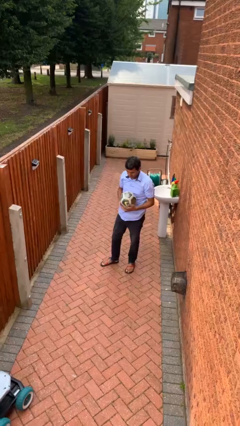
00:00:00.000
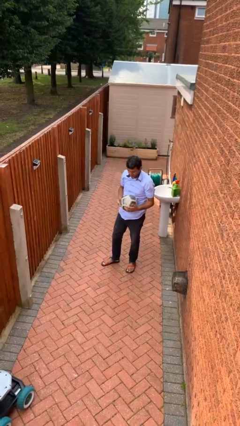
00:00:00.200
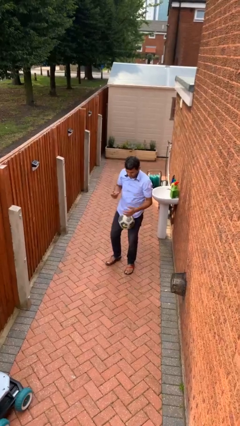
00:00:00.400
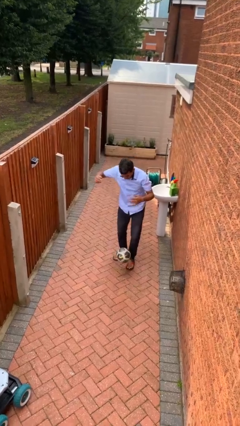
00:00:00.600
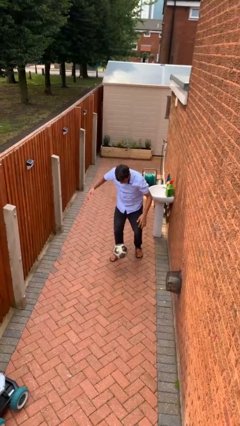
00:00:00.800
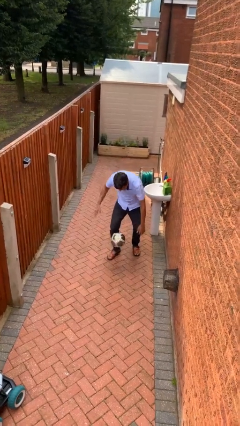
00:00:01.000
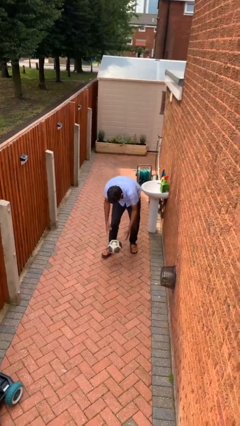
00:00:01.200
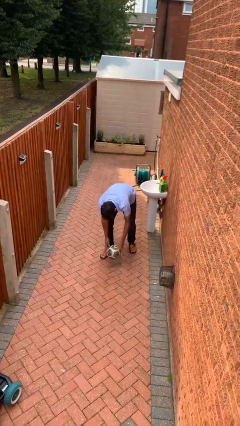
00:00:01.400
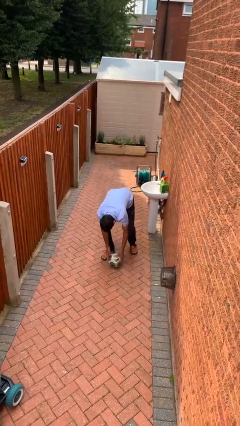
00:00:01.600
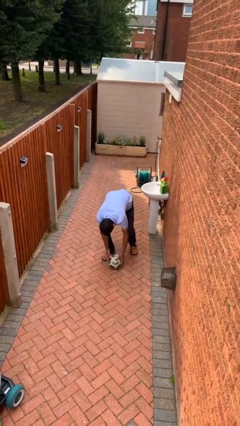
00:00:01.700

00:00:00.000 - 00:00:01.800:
person drops object

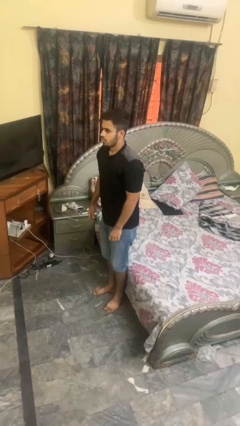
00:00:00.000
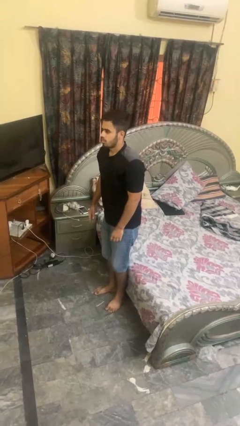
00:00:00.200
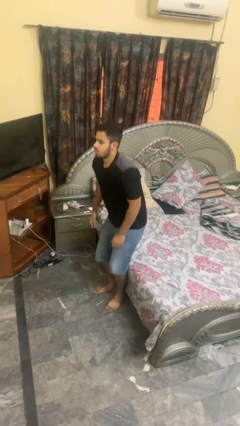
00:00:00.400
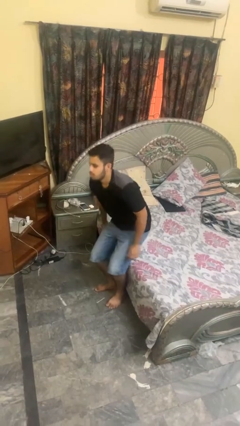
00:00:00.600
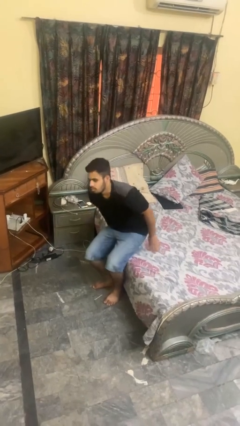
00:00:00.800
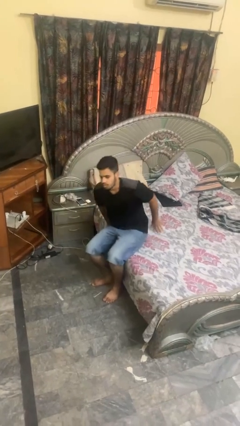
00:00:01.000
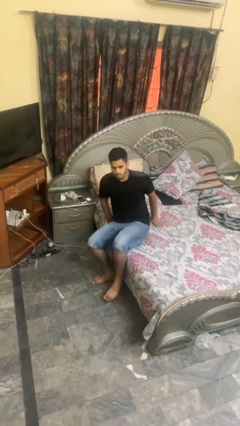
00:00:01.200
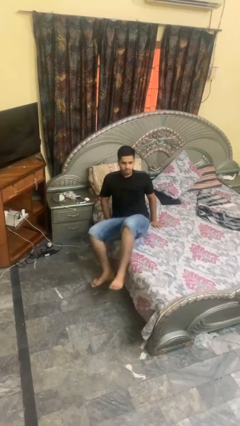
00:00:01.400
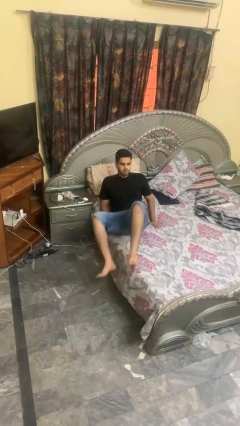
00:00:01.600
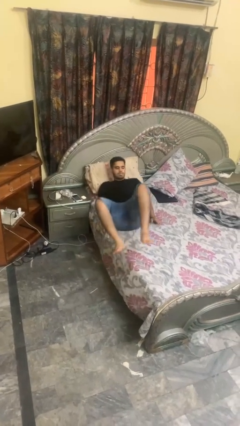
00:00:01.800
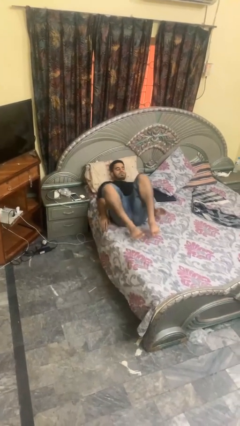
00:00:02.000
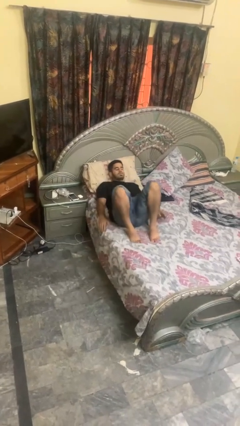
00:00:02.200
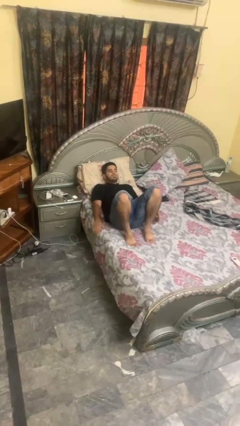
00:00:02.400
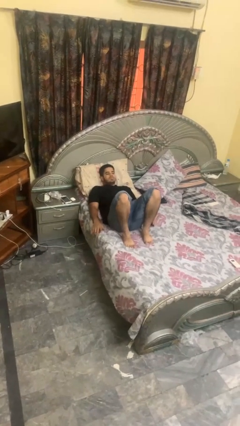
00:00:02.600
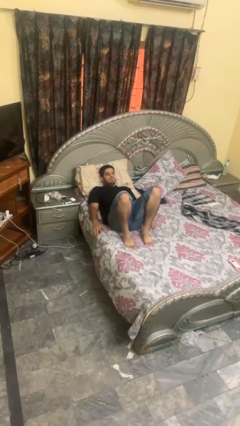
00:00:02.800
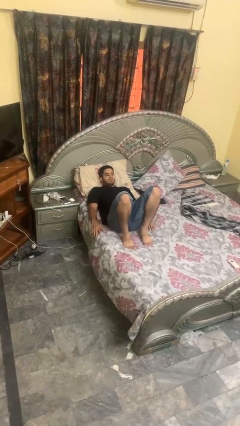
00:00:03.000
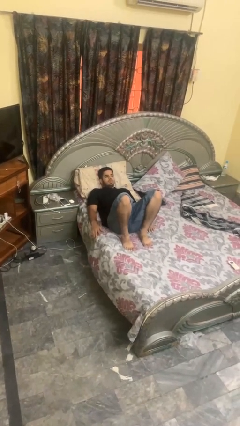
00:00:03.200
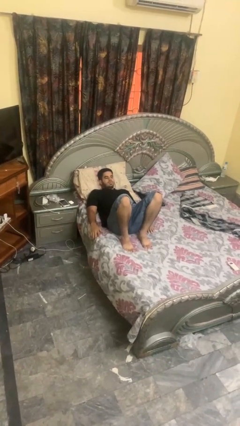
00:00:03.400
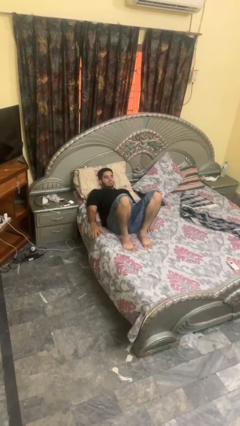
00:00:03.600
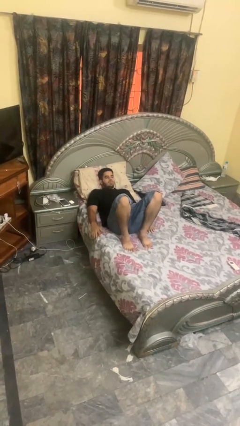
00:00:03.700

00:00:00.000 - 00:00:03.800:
person lies down on bed

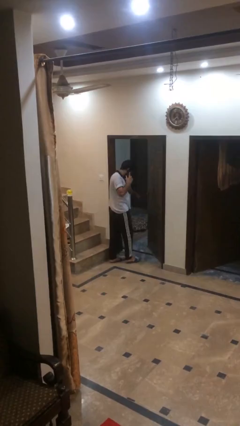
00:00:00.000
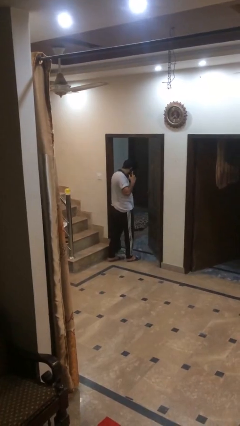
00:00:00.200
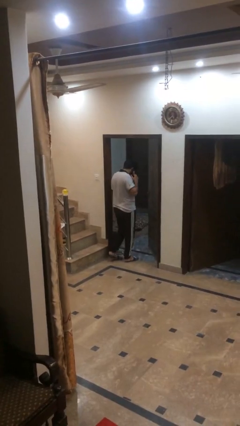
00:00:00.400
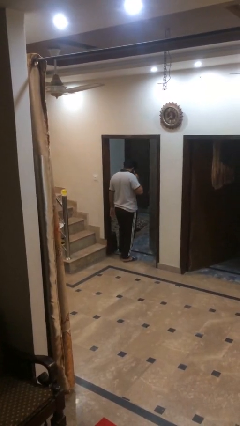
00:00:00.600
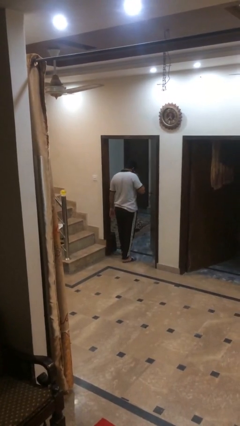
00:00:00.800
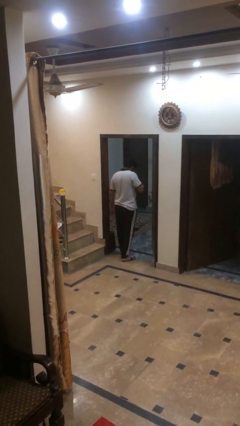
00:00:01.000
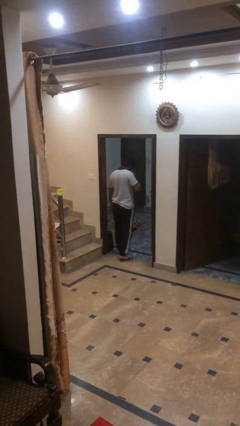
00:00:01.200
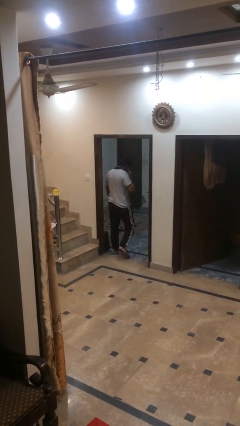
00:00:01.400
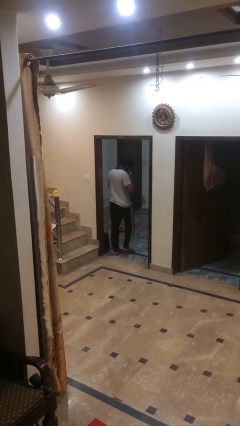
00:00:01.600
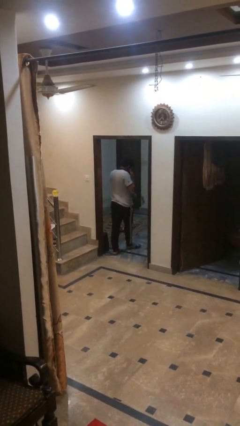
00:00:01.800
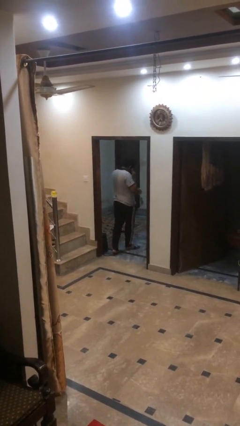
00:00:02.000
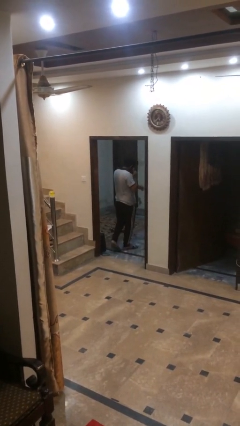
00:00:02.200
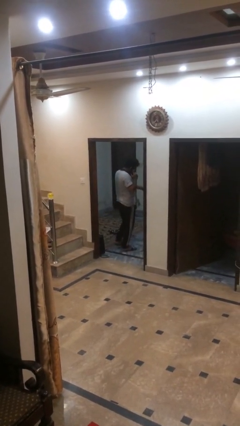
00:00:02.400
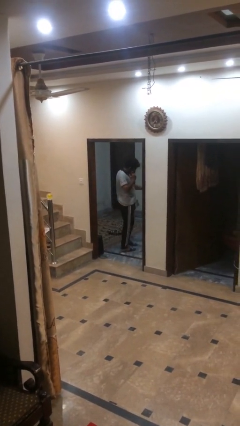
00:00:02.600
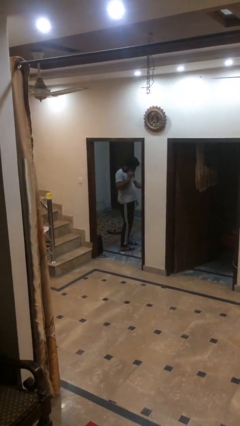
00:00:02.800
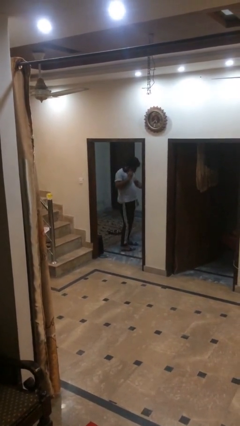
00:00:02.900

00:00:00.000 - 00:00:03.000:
person exits scene through structure

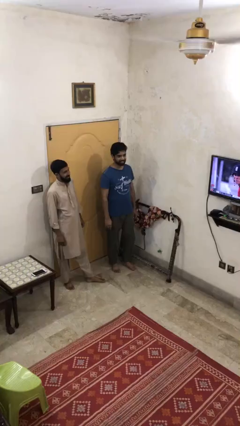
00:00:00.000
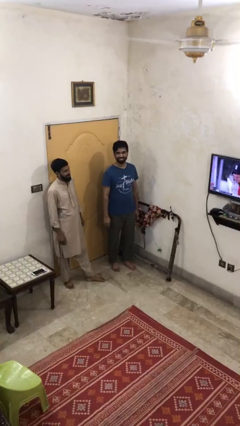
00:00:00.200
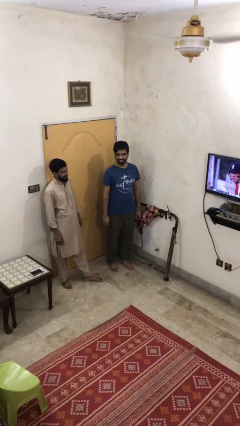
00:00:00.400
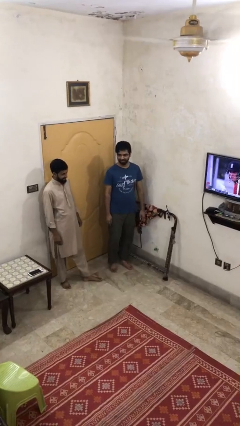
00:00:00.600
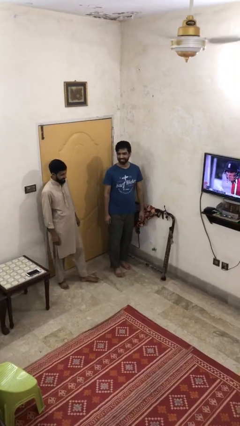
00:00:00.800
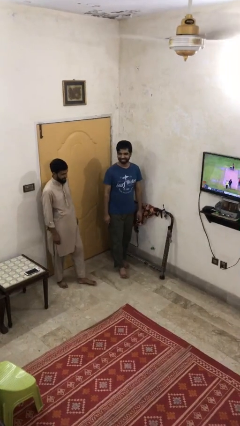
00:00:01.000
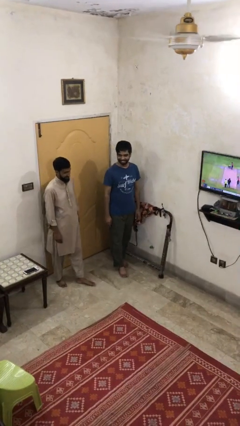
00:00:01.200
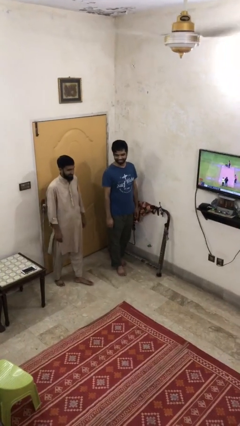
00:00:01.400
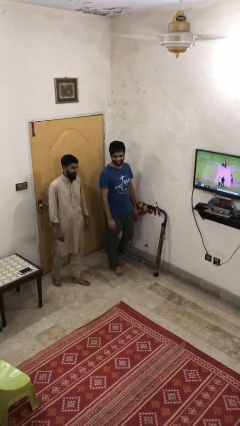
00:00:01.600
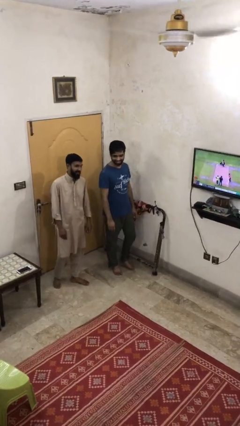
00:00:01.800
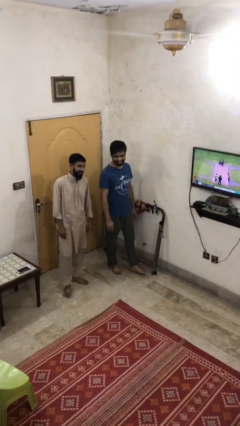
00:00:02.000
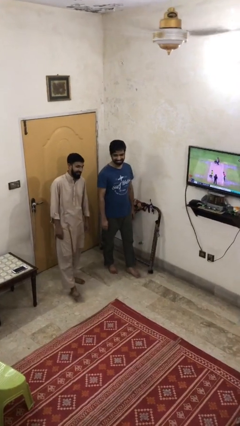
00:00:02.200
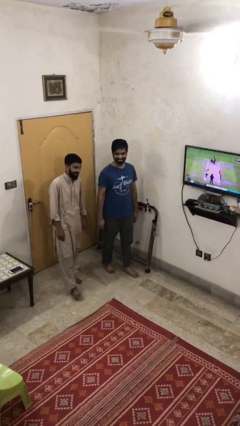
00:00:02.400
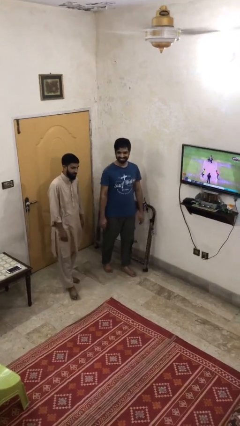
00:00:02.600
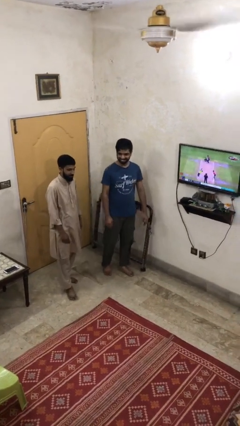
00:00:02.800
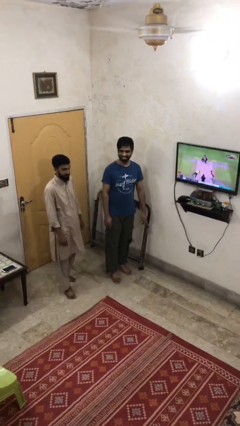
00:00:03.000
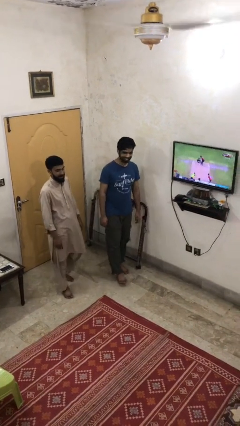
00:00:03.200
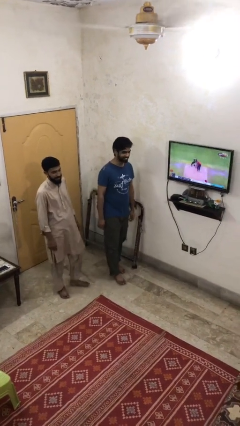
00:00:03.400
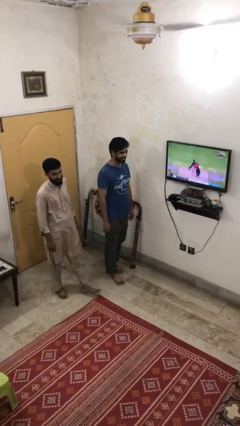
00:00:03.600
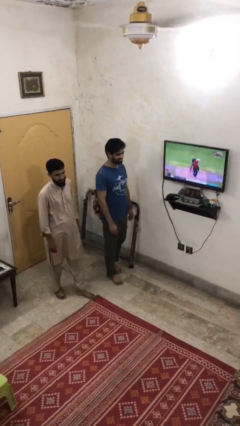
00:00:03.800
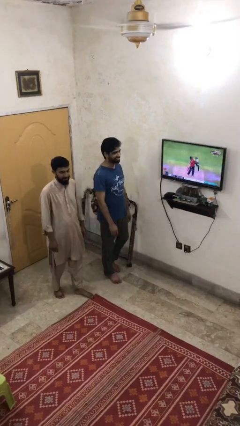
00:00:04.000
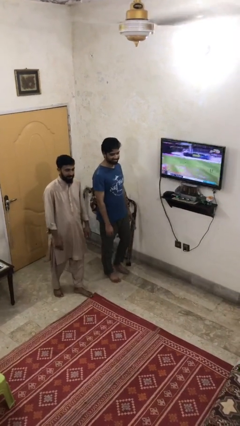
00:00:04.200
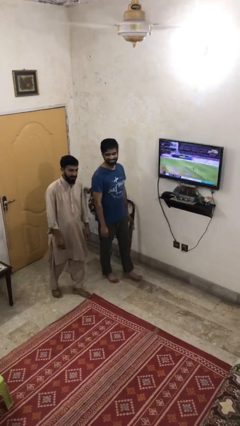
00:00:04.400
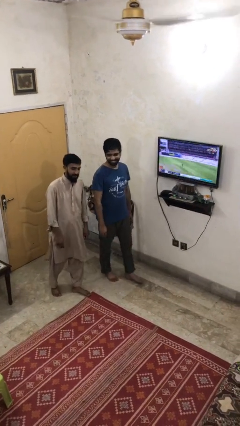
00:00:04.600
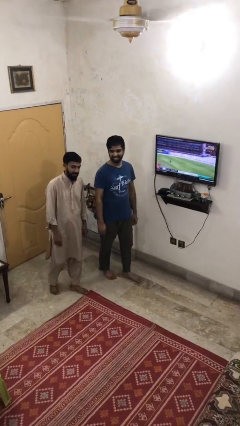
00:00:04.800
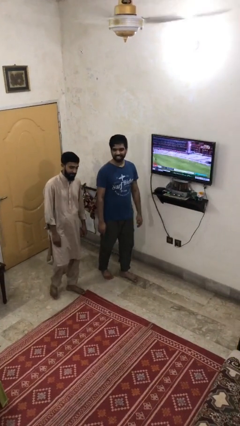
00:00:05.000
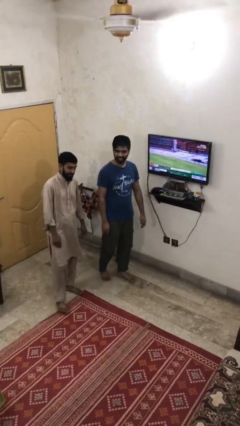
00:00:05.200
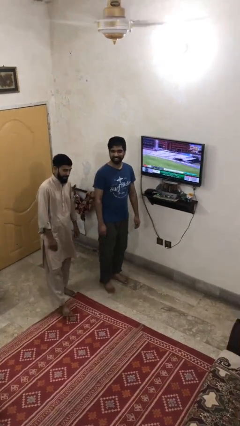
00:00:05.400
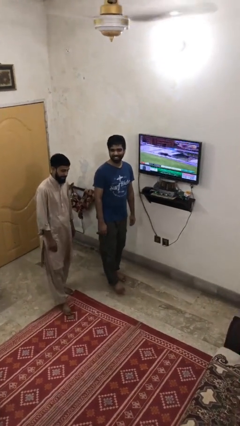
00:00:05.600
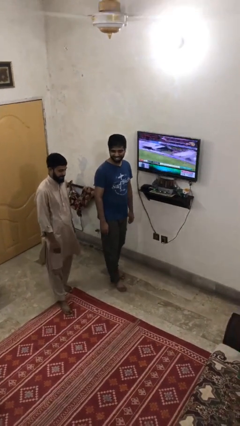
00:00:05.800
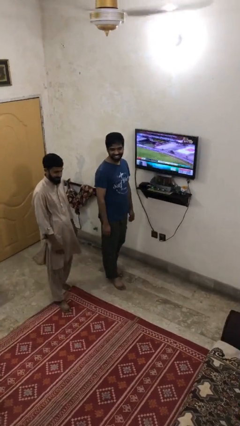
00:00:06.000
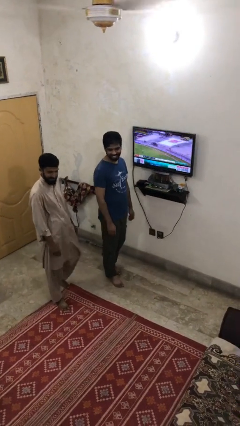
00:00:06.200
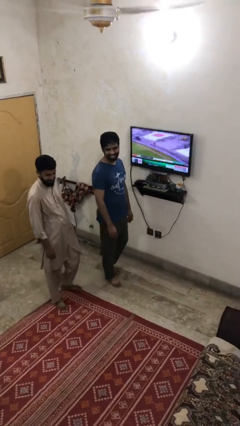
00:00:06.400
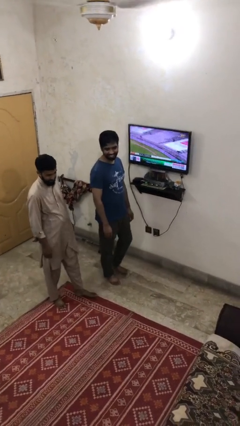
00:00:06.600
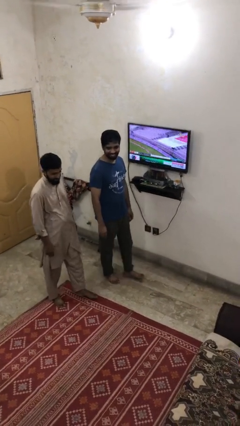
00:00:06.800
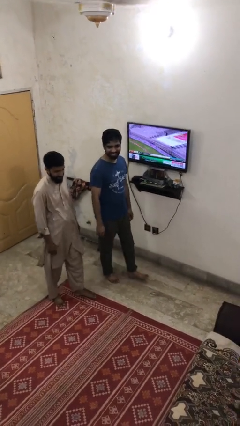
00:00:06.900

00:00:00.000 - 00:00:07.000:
person talks to person

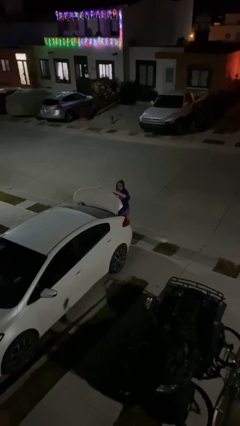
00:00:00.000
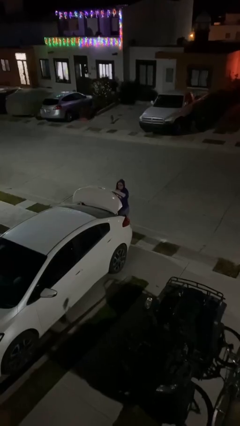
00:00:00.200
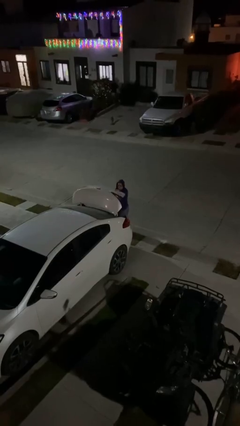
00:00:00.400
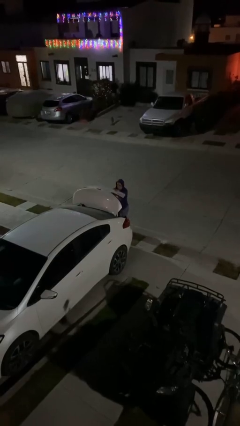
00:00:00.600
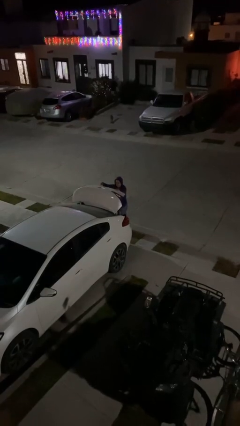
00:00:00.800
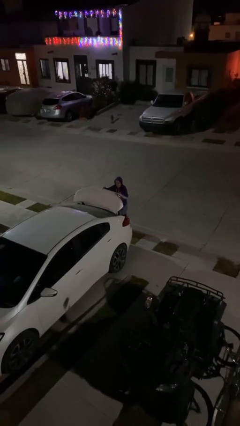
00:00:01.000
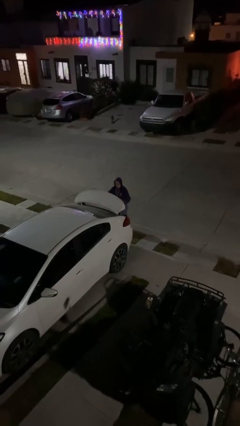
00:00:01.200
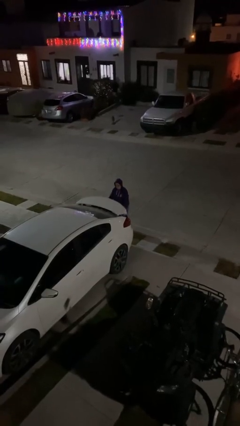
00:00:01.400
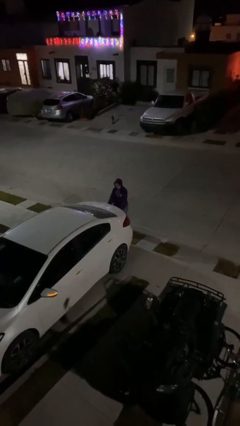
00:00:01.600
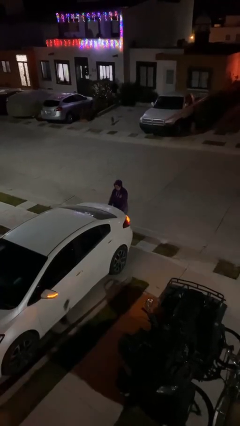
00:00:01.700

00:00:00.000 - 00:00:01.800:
person closes car trunk

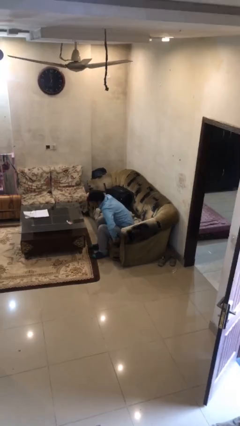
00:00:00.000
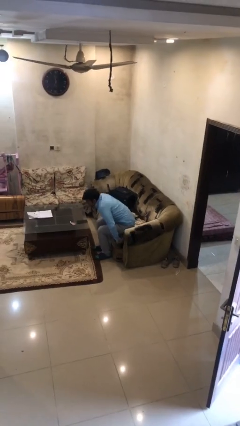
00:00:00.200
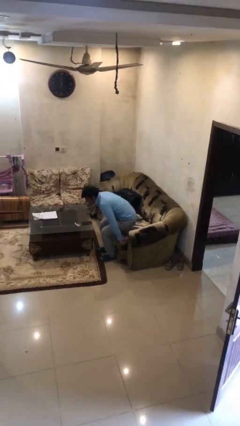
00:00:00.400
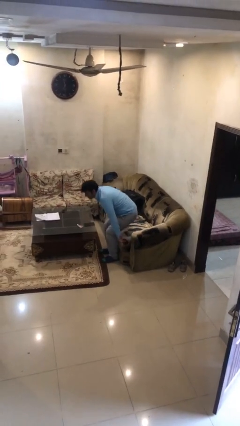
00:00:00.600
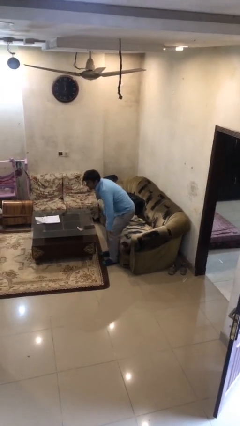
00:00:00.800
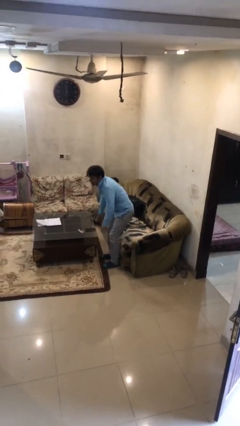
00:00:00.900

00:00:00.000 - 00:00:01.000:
person stands up
